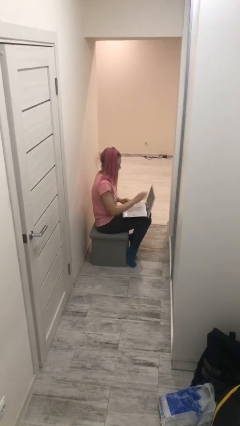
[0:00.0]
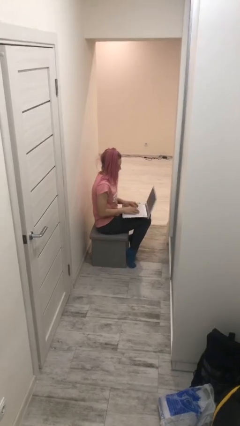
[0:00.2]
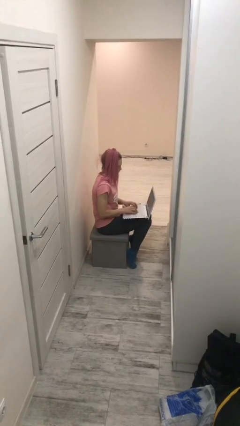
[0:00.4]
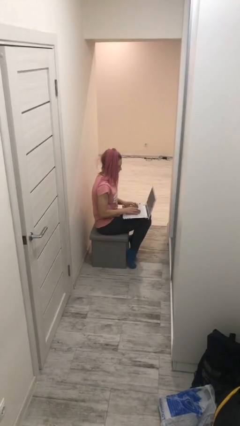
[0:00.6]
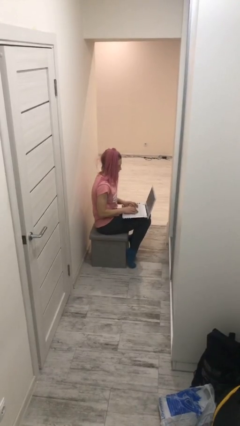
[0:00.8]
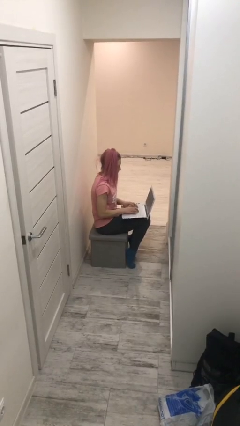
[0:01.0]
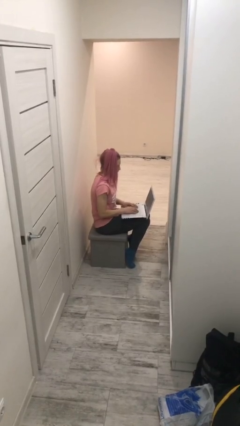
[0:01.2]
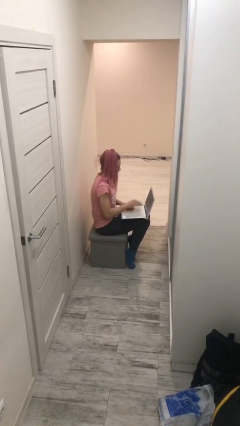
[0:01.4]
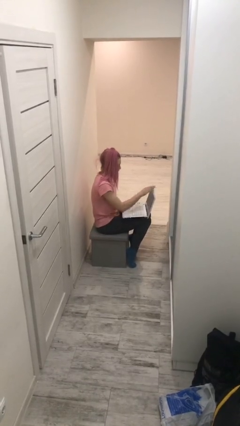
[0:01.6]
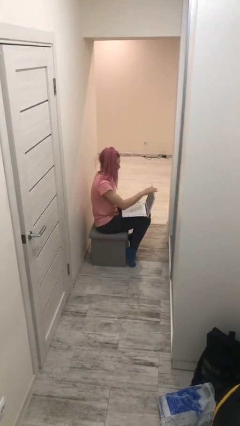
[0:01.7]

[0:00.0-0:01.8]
person interacts with laptop

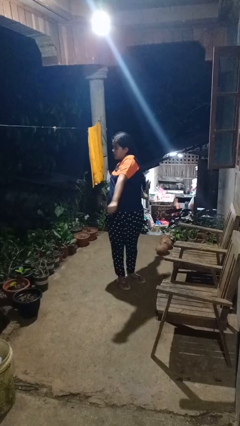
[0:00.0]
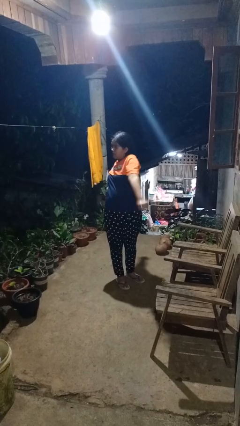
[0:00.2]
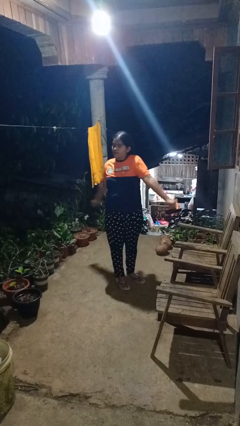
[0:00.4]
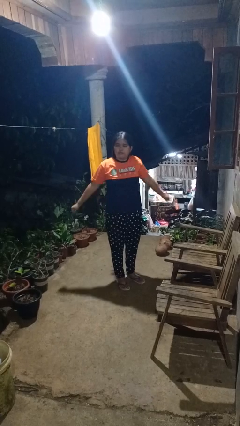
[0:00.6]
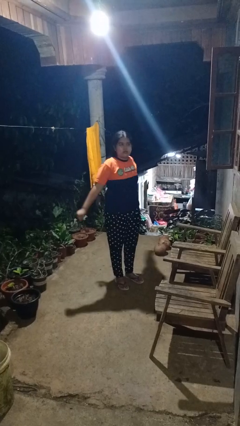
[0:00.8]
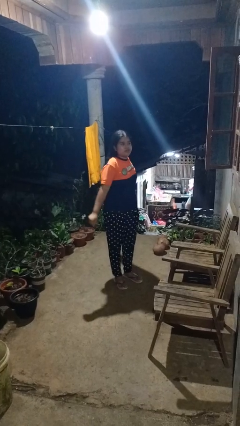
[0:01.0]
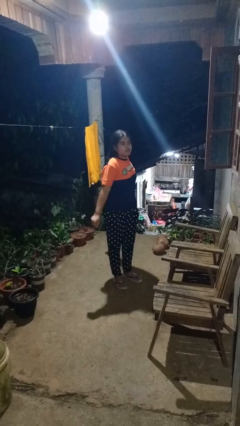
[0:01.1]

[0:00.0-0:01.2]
person stretches arms to side

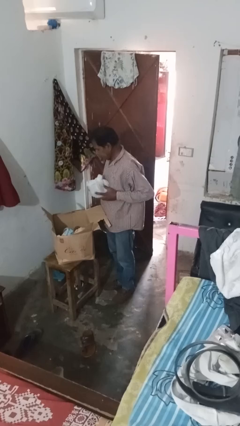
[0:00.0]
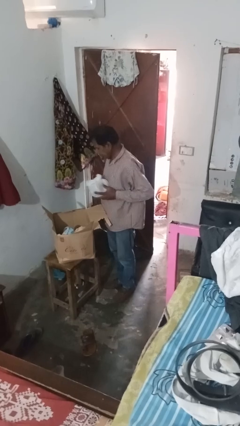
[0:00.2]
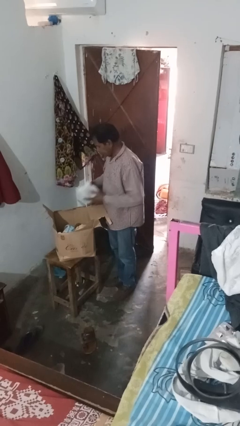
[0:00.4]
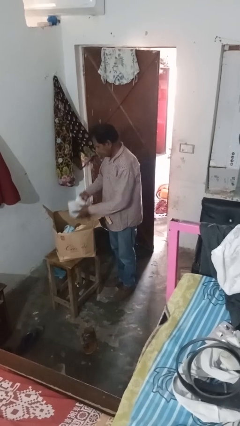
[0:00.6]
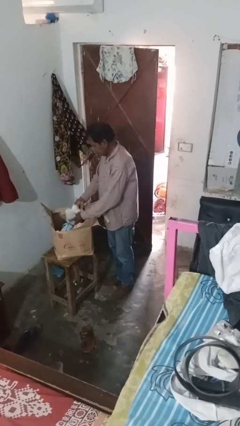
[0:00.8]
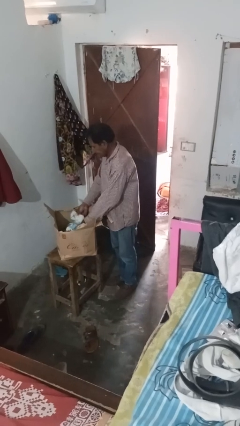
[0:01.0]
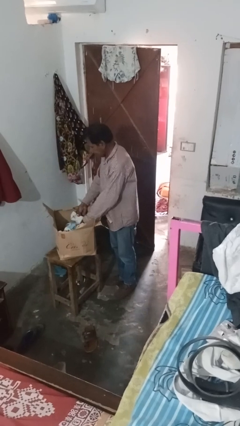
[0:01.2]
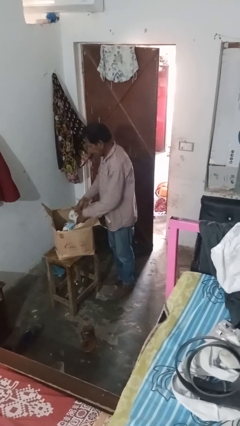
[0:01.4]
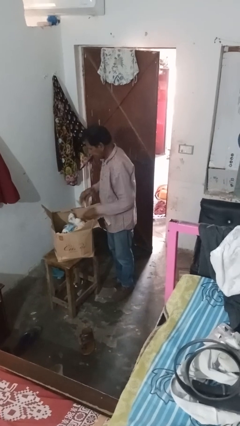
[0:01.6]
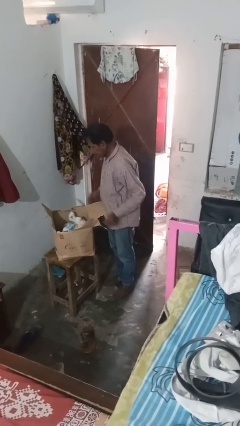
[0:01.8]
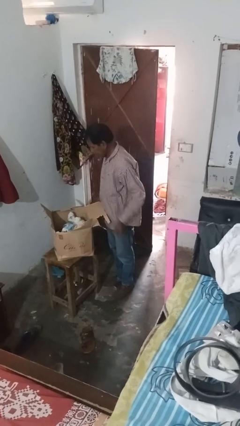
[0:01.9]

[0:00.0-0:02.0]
person puts object into box

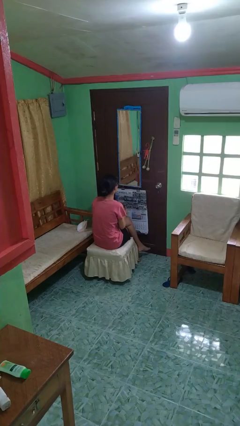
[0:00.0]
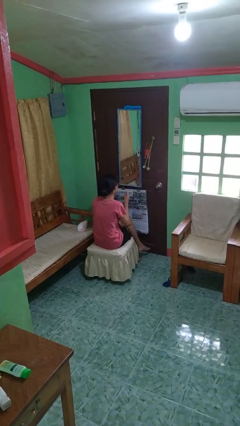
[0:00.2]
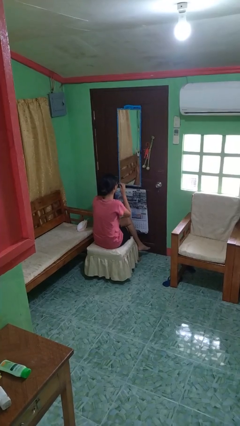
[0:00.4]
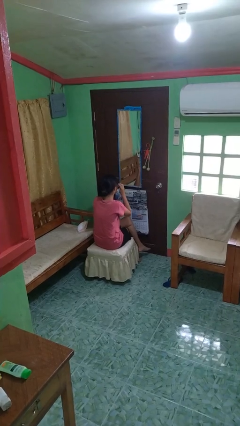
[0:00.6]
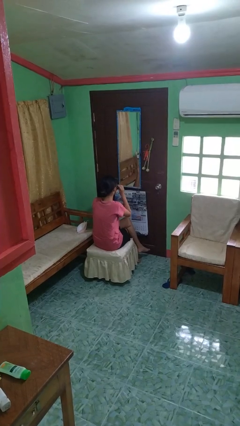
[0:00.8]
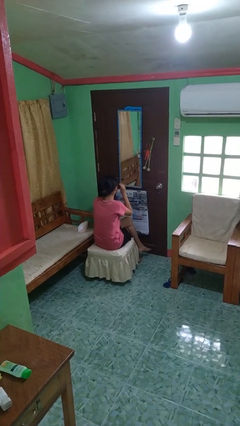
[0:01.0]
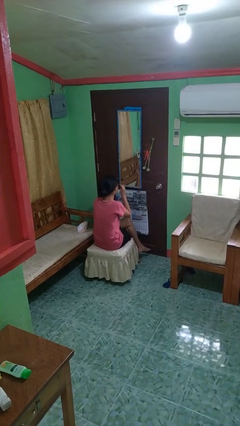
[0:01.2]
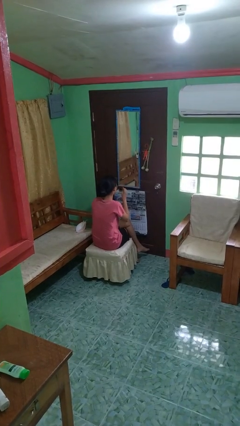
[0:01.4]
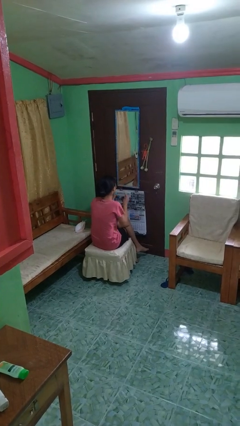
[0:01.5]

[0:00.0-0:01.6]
person takes off sunglasses

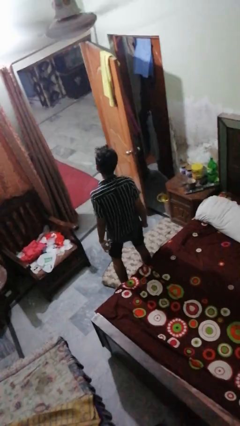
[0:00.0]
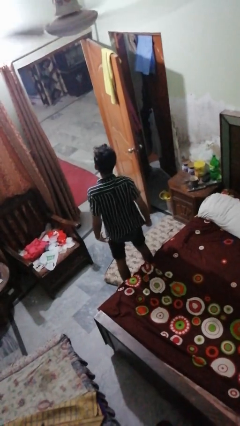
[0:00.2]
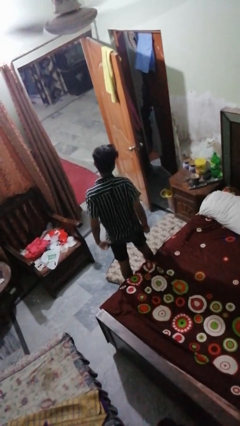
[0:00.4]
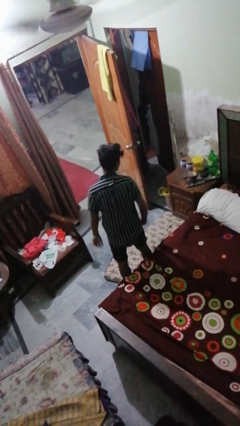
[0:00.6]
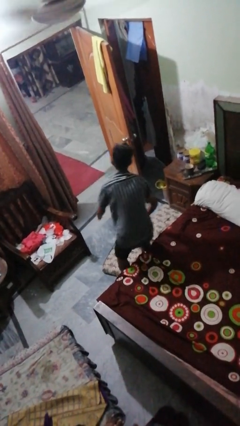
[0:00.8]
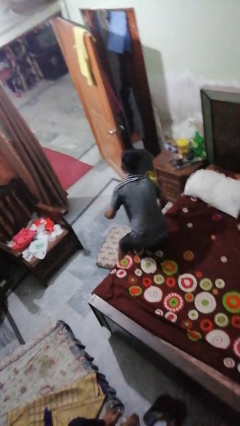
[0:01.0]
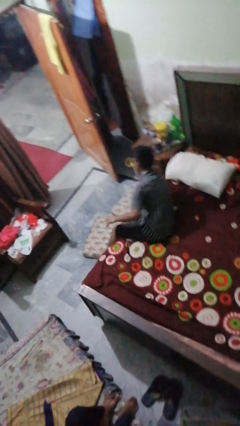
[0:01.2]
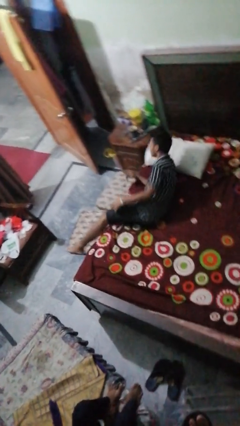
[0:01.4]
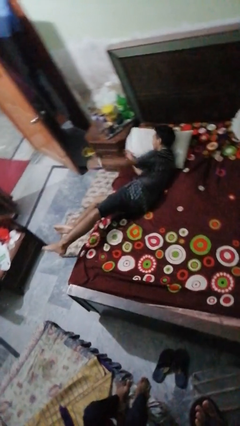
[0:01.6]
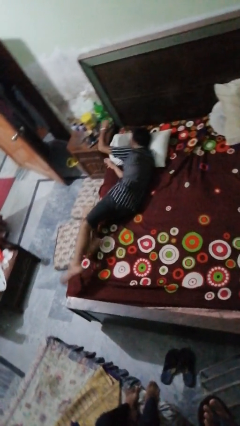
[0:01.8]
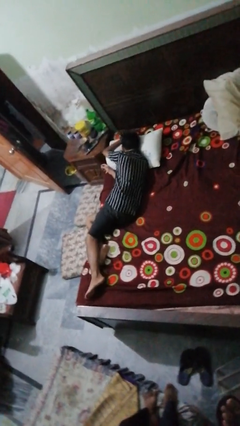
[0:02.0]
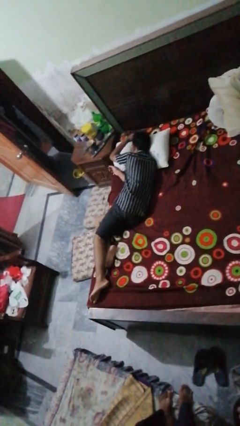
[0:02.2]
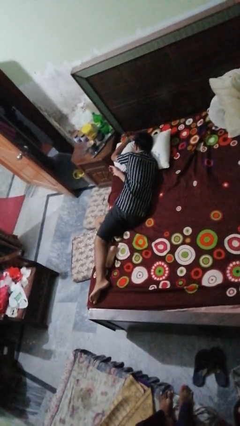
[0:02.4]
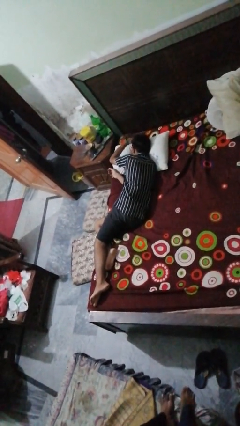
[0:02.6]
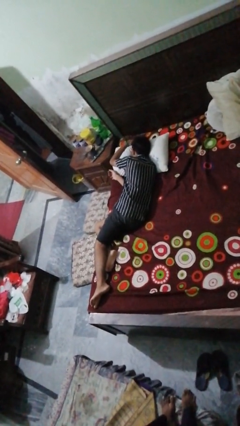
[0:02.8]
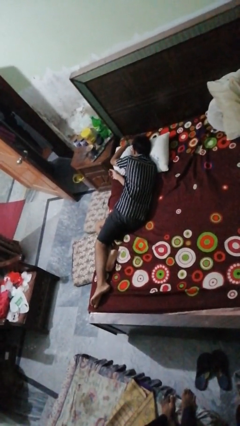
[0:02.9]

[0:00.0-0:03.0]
person lies down on bed

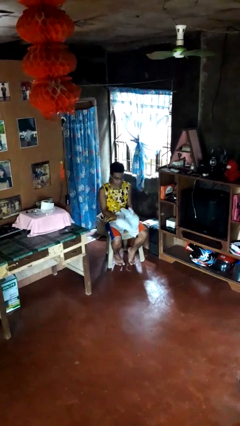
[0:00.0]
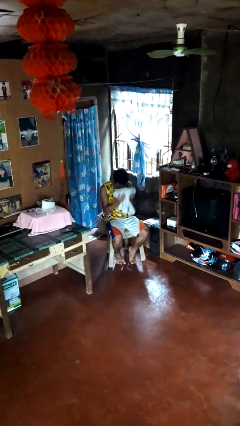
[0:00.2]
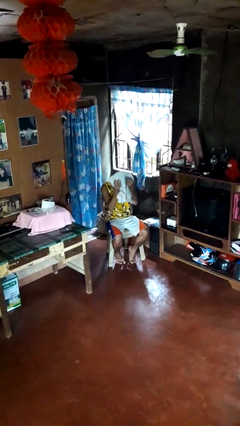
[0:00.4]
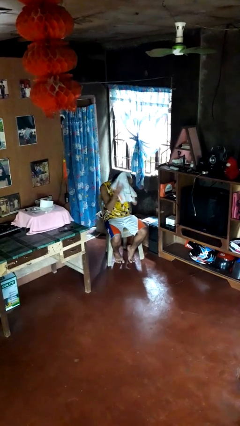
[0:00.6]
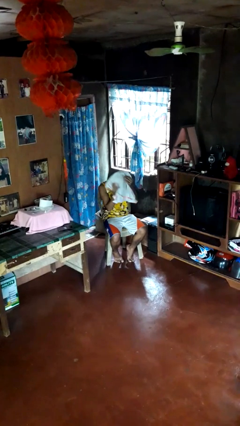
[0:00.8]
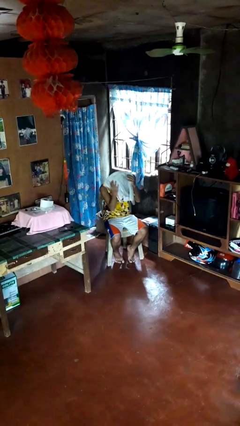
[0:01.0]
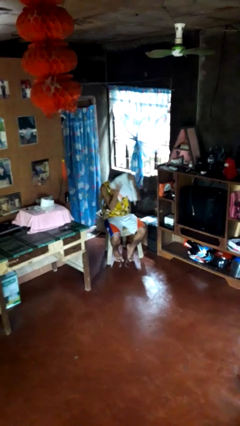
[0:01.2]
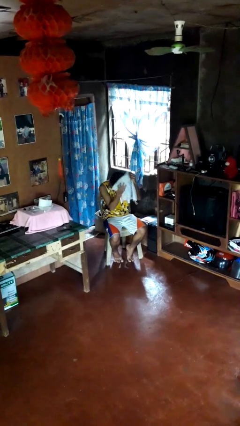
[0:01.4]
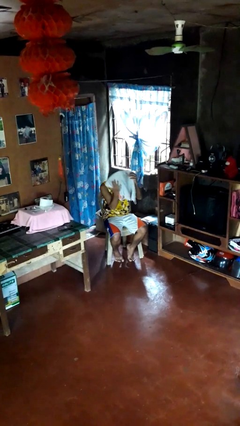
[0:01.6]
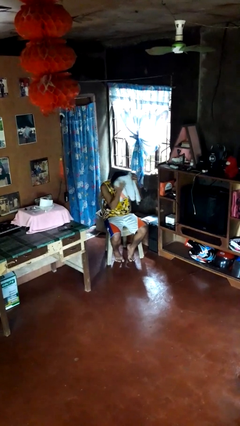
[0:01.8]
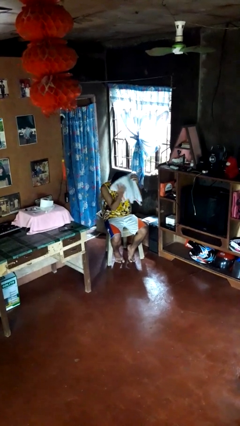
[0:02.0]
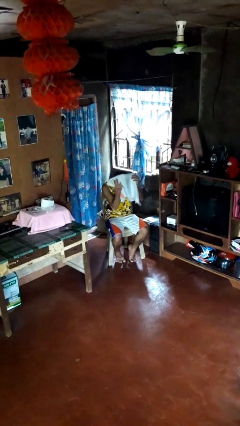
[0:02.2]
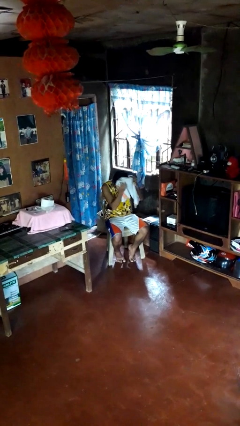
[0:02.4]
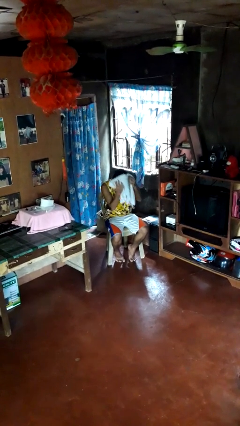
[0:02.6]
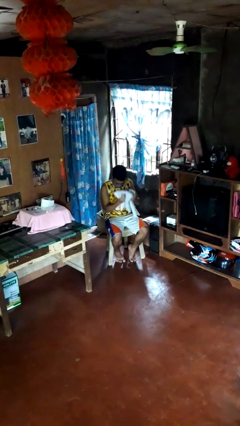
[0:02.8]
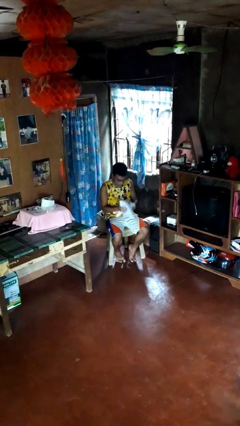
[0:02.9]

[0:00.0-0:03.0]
person dries hair with towel

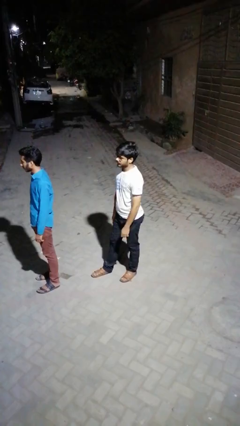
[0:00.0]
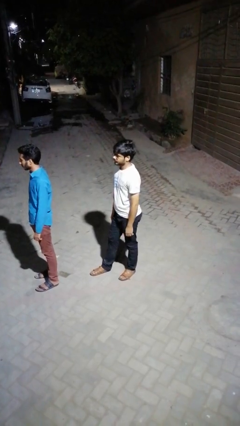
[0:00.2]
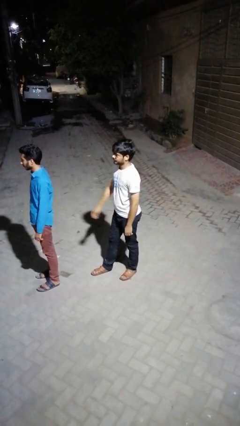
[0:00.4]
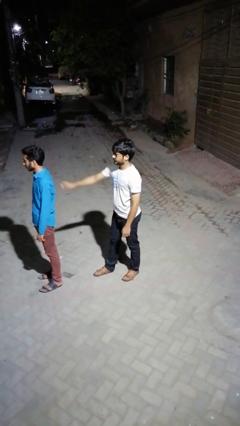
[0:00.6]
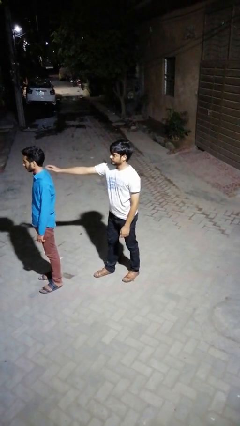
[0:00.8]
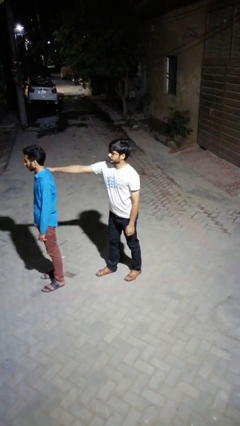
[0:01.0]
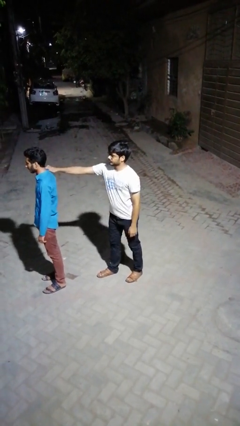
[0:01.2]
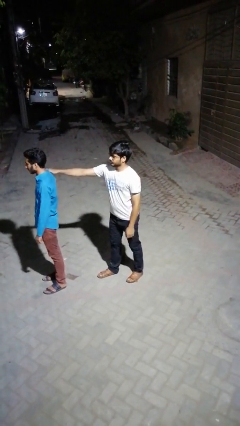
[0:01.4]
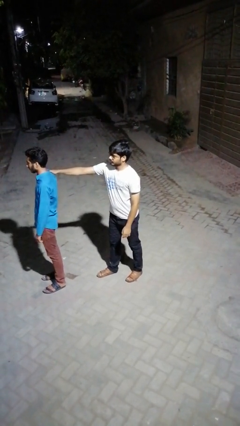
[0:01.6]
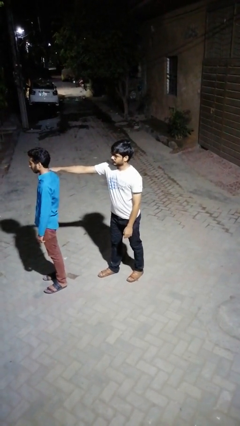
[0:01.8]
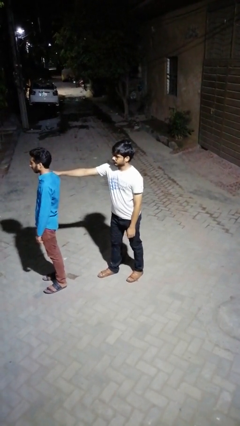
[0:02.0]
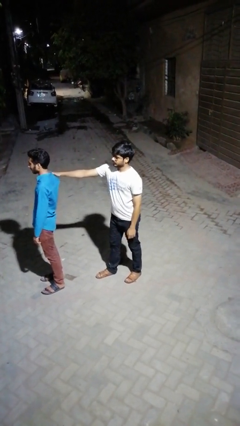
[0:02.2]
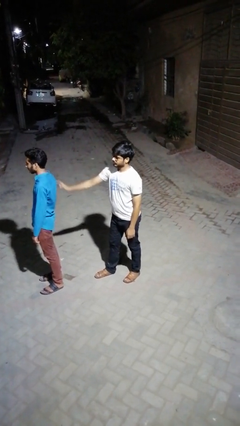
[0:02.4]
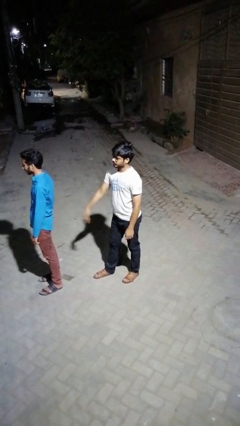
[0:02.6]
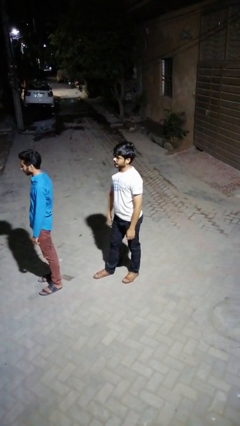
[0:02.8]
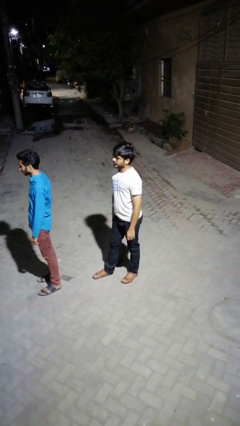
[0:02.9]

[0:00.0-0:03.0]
person touches back of person

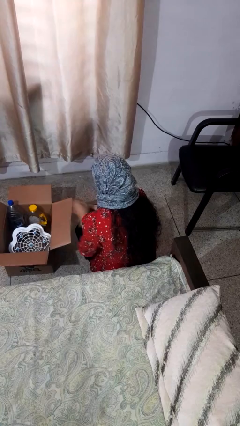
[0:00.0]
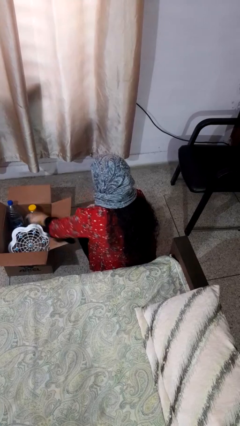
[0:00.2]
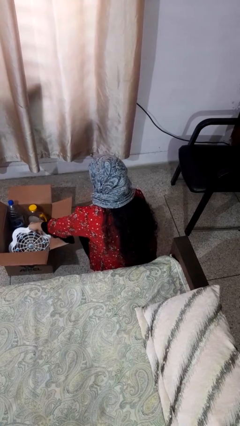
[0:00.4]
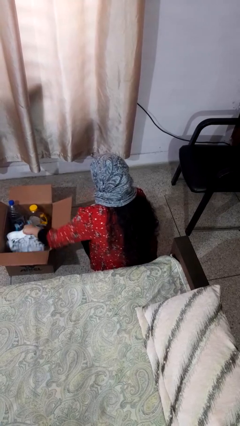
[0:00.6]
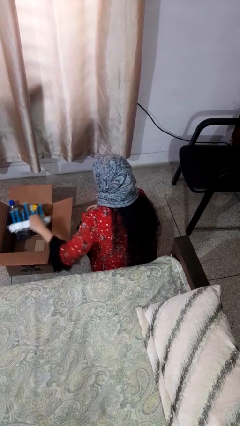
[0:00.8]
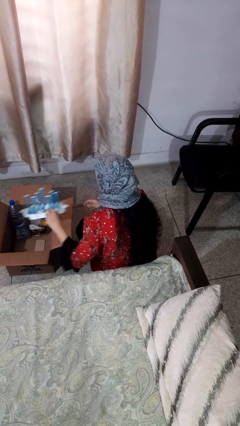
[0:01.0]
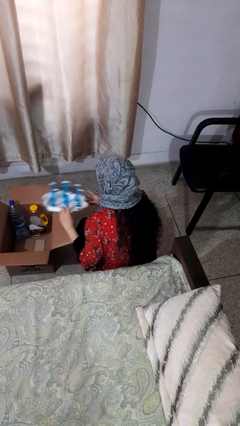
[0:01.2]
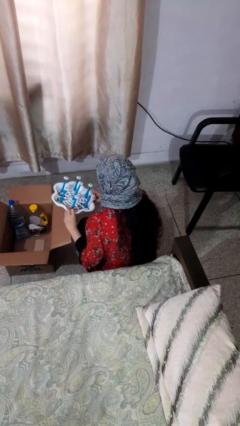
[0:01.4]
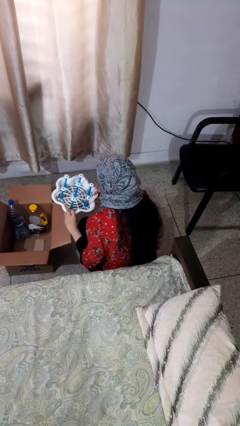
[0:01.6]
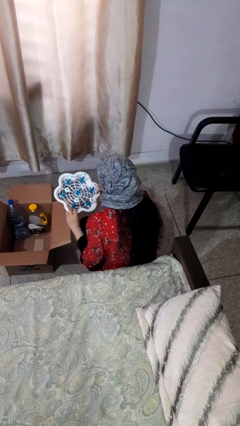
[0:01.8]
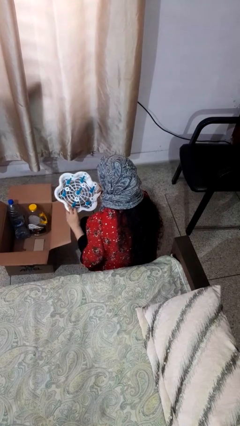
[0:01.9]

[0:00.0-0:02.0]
person takes object from box
